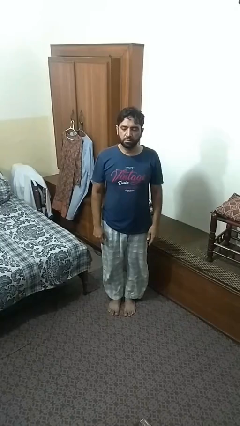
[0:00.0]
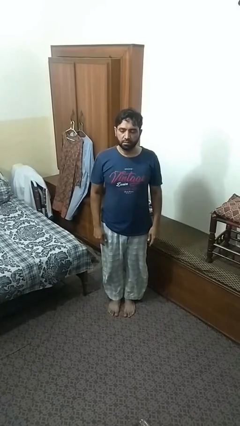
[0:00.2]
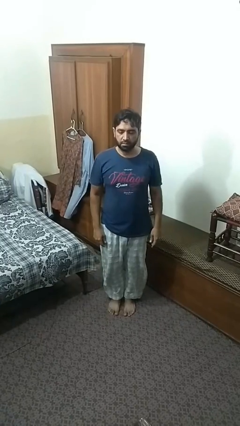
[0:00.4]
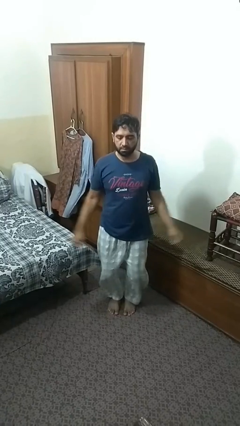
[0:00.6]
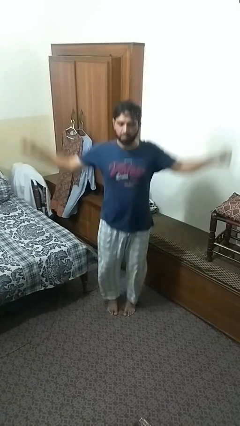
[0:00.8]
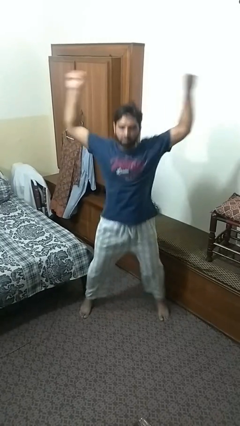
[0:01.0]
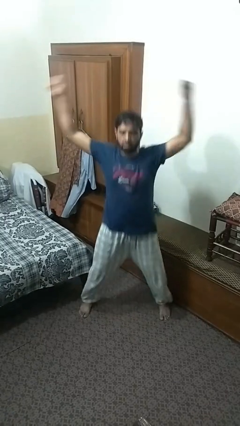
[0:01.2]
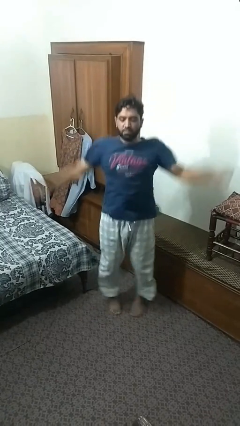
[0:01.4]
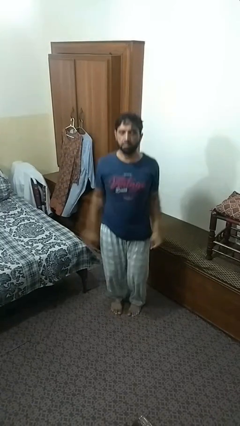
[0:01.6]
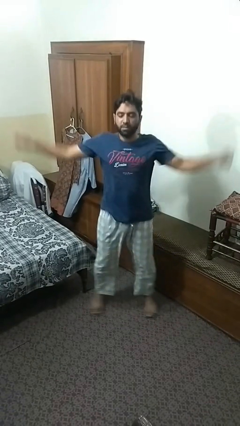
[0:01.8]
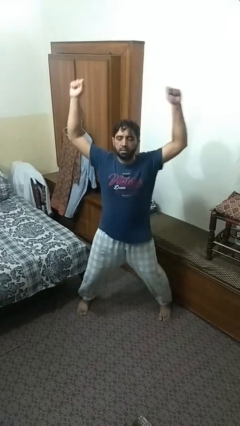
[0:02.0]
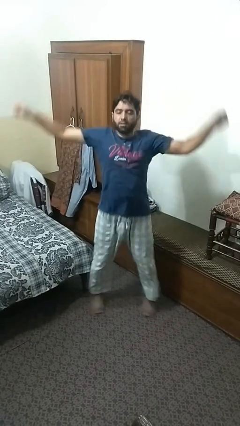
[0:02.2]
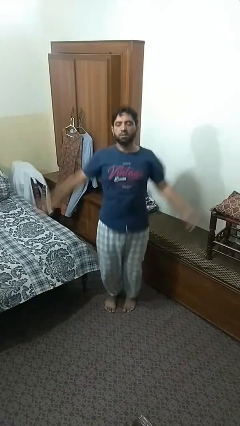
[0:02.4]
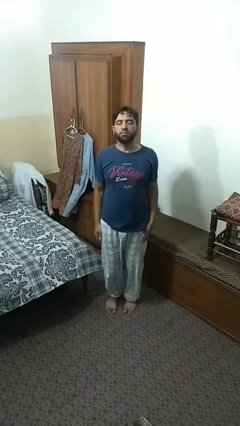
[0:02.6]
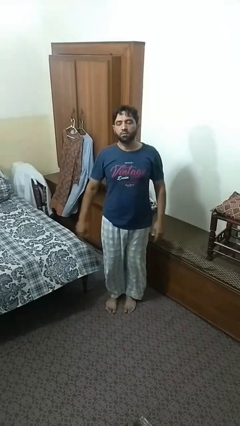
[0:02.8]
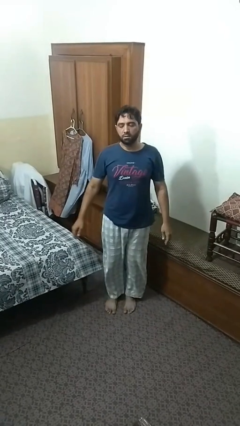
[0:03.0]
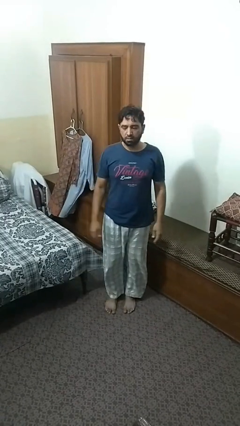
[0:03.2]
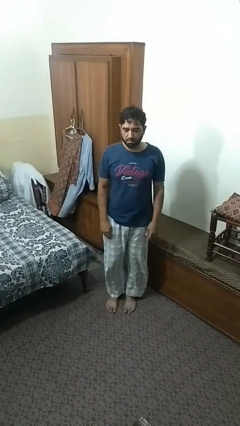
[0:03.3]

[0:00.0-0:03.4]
person exercises with jumping jacks

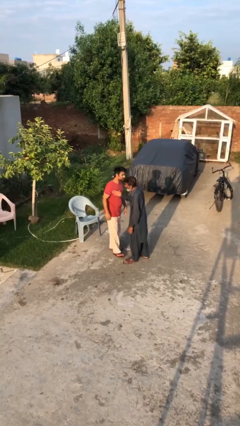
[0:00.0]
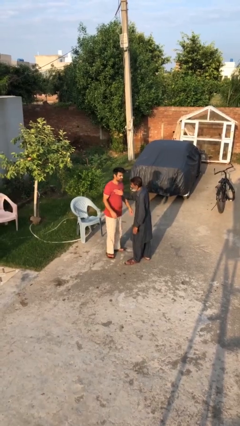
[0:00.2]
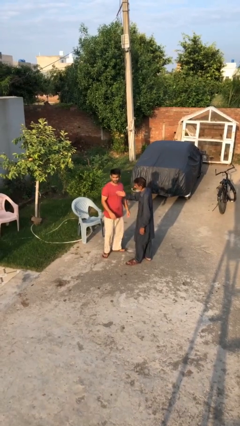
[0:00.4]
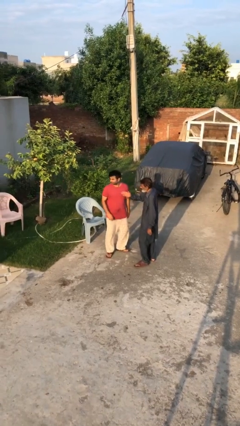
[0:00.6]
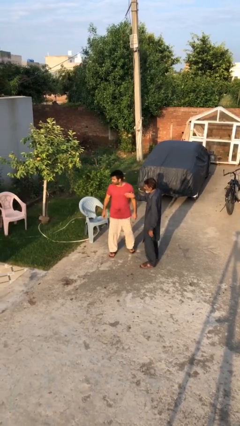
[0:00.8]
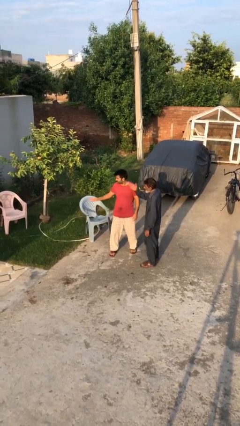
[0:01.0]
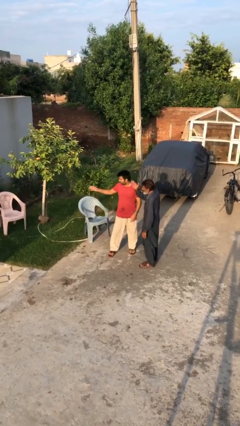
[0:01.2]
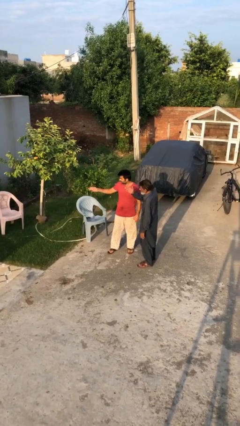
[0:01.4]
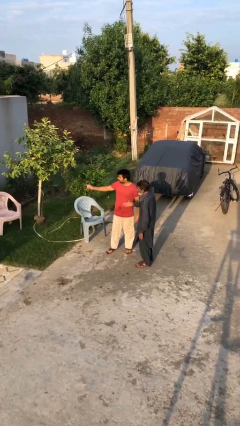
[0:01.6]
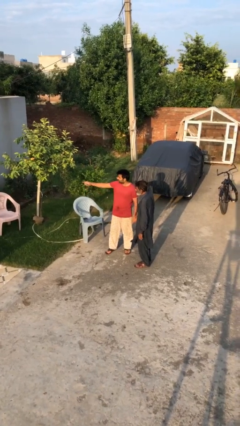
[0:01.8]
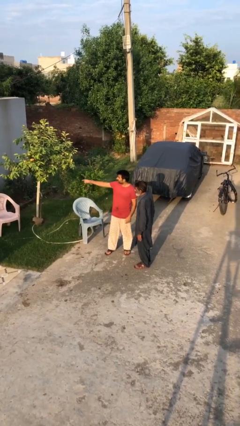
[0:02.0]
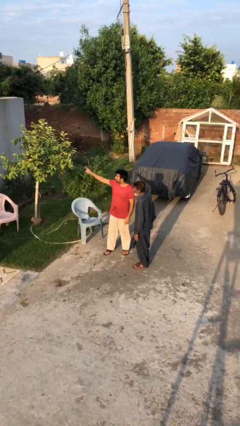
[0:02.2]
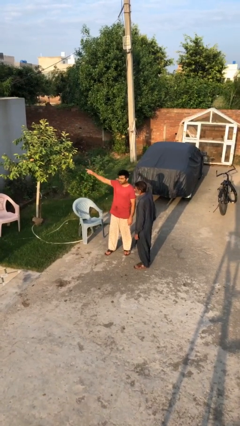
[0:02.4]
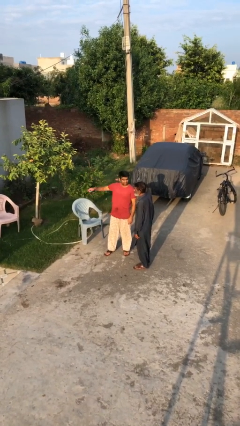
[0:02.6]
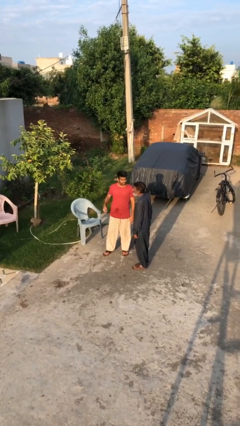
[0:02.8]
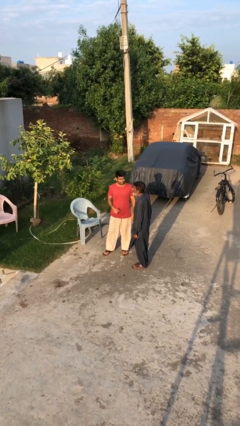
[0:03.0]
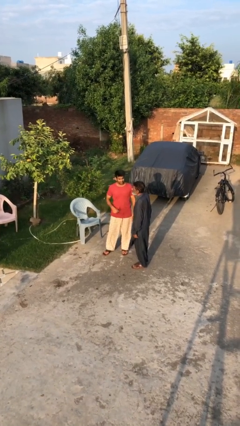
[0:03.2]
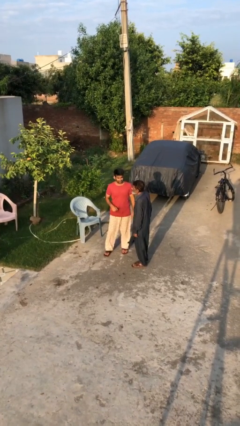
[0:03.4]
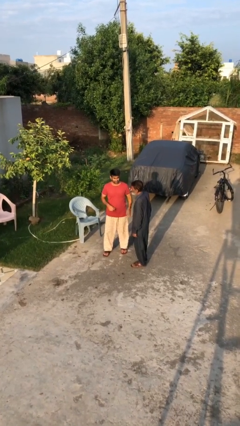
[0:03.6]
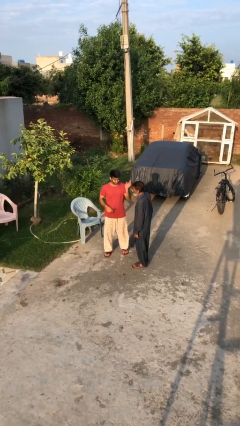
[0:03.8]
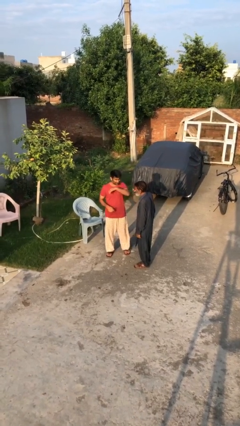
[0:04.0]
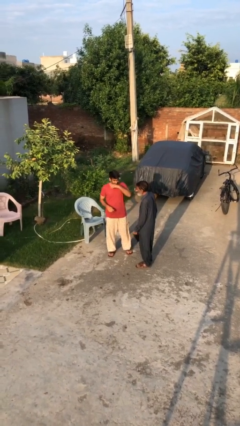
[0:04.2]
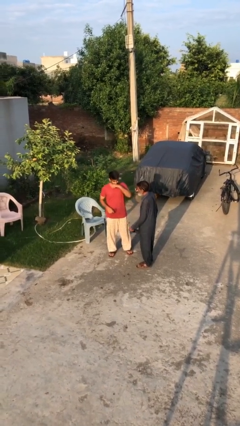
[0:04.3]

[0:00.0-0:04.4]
person talks to person

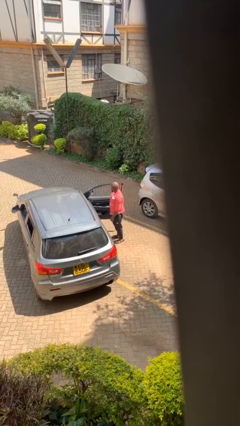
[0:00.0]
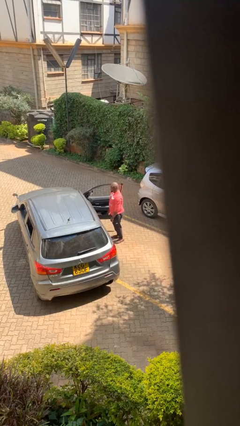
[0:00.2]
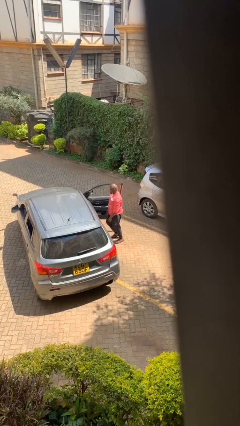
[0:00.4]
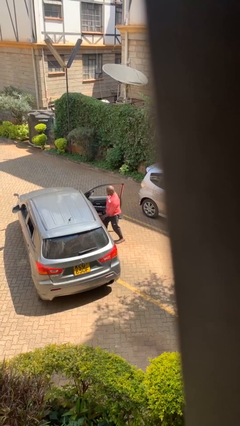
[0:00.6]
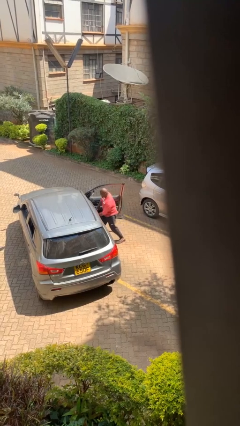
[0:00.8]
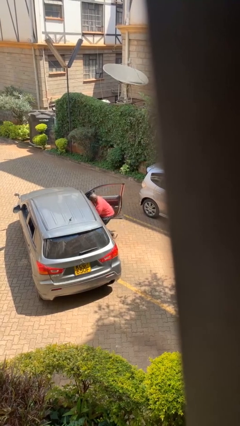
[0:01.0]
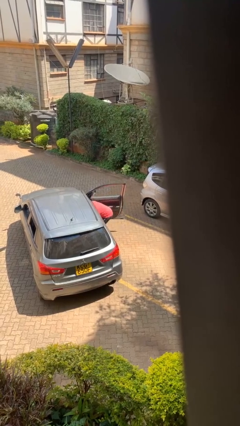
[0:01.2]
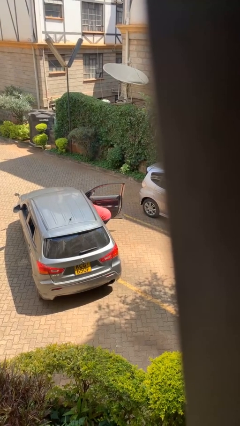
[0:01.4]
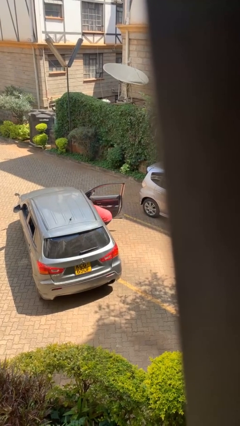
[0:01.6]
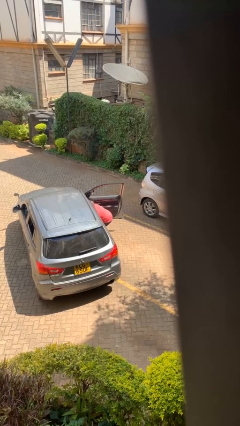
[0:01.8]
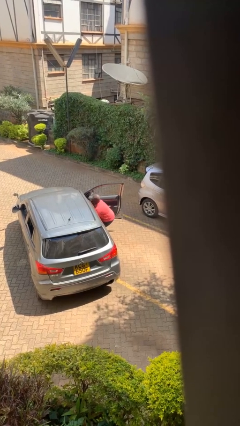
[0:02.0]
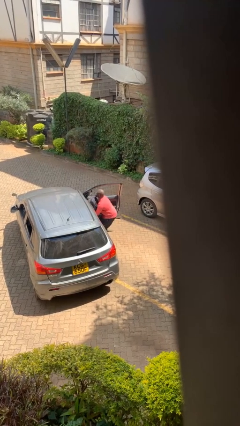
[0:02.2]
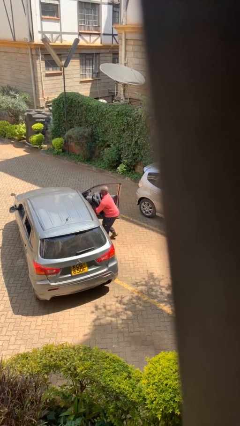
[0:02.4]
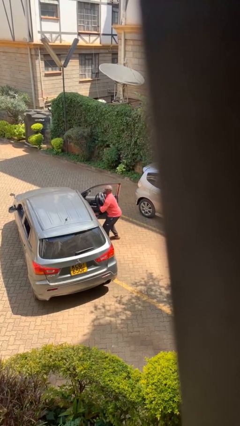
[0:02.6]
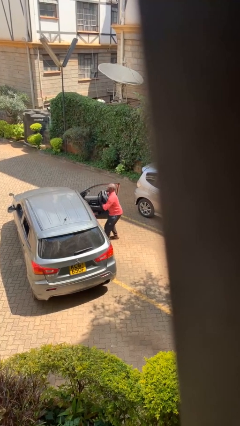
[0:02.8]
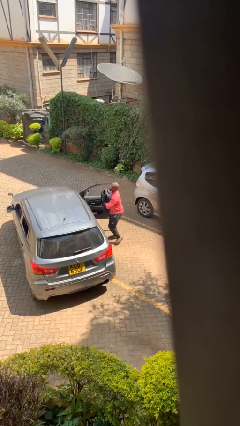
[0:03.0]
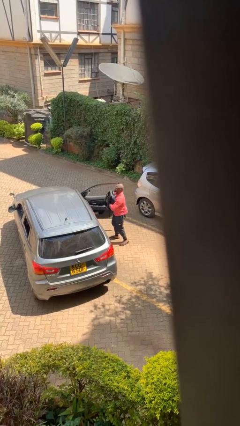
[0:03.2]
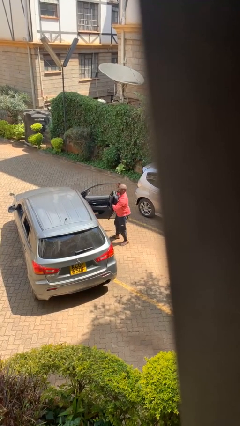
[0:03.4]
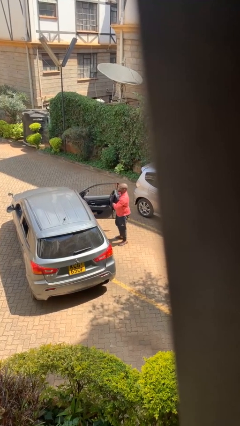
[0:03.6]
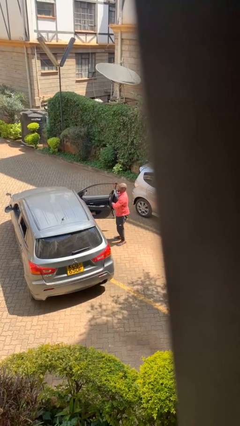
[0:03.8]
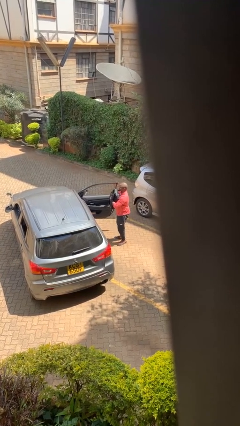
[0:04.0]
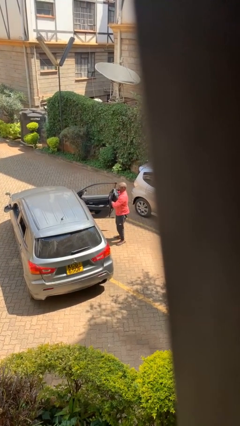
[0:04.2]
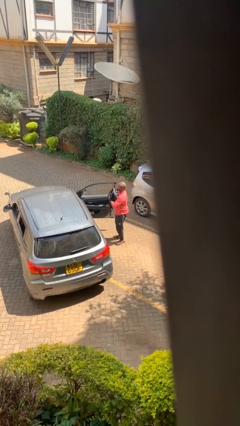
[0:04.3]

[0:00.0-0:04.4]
person unloads car

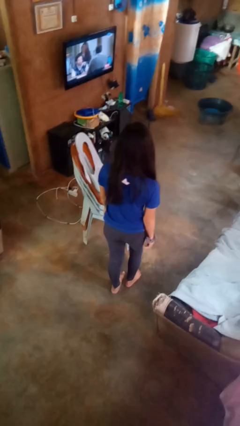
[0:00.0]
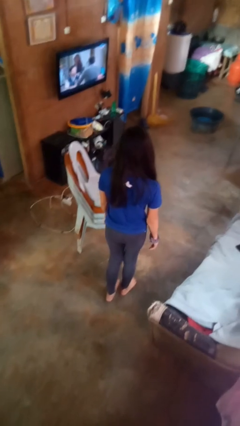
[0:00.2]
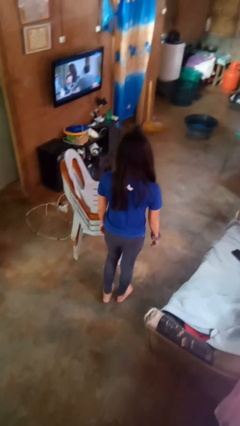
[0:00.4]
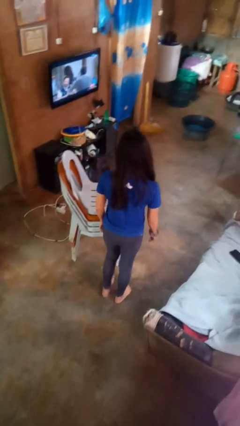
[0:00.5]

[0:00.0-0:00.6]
person trips on object on floor

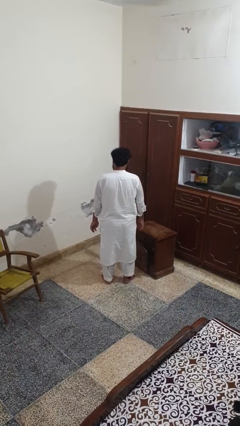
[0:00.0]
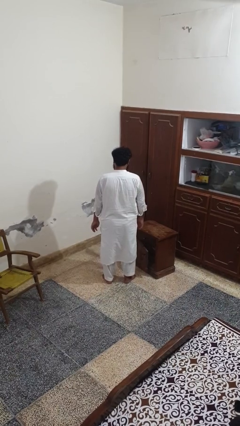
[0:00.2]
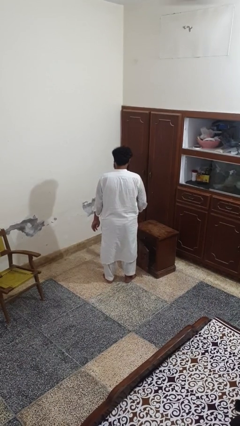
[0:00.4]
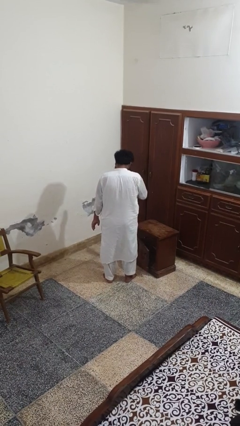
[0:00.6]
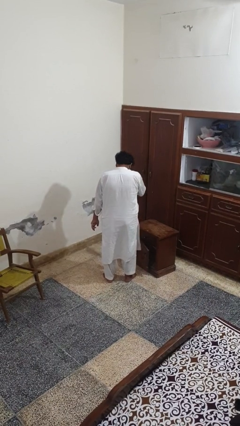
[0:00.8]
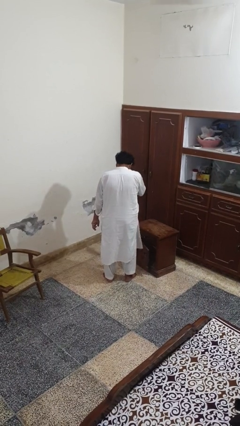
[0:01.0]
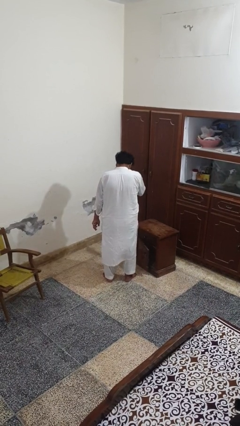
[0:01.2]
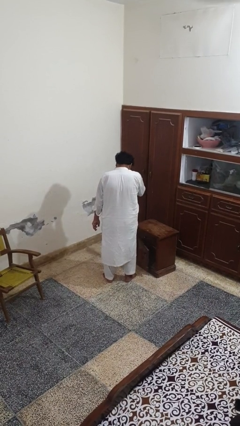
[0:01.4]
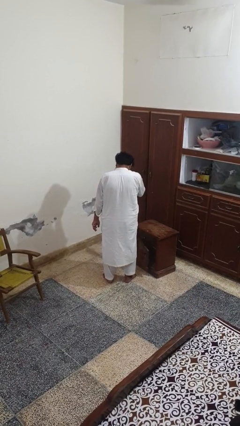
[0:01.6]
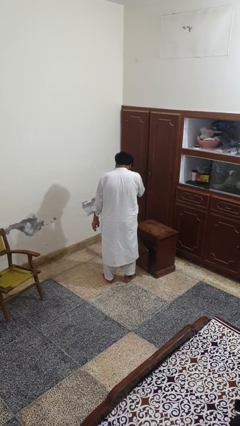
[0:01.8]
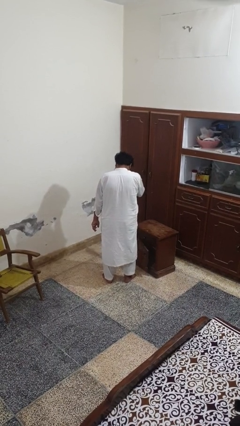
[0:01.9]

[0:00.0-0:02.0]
person sneezes into hand

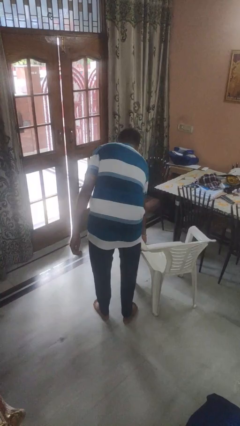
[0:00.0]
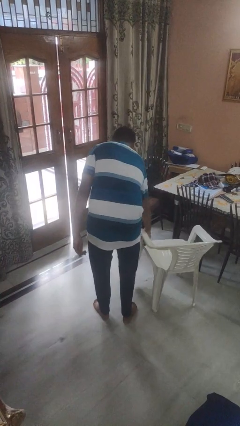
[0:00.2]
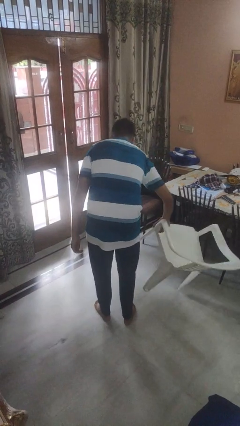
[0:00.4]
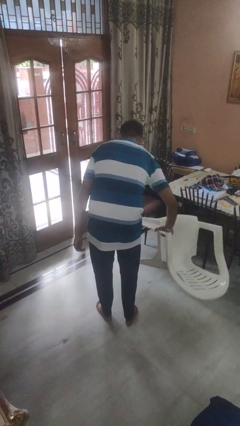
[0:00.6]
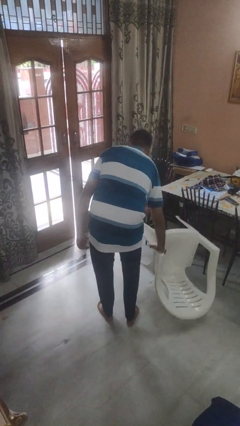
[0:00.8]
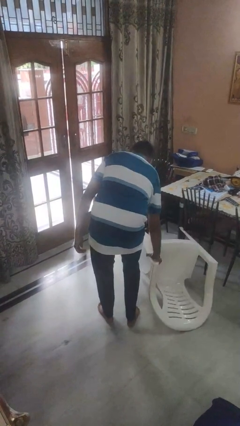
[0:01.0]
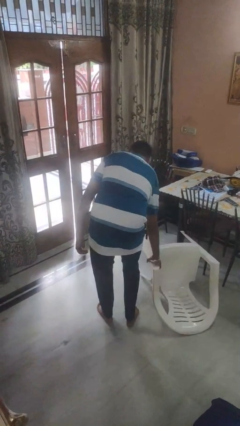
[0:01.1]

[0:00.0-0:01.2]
person knocks over furniture

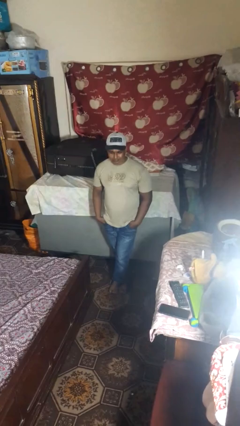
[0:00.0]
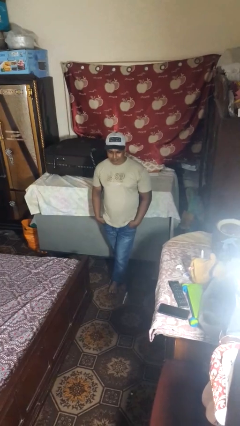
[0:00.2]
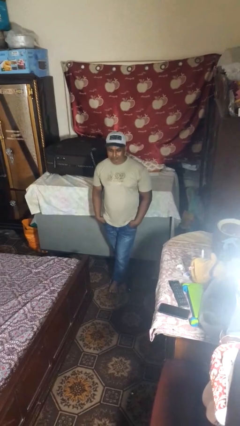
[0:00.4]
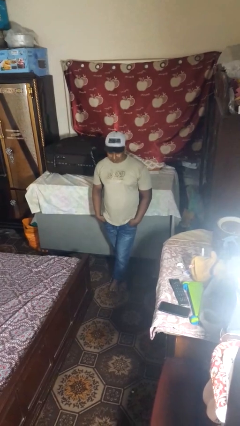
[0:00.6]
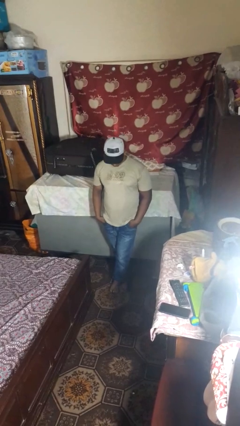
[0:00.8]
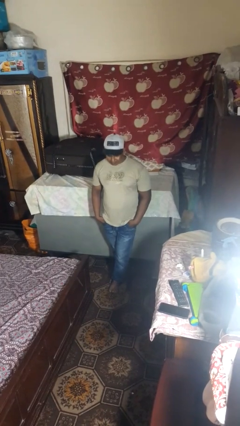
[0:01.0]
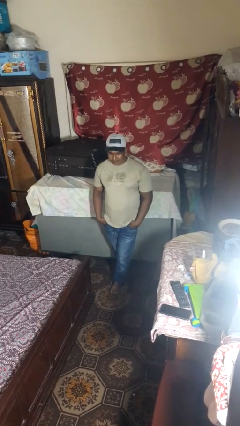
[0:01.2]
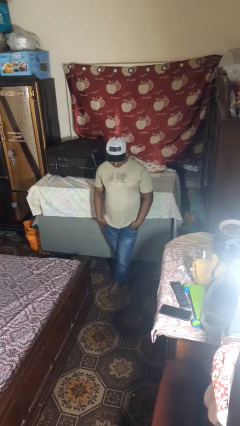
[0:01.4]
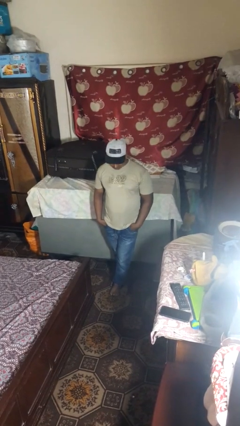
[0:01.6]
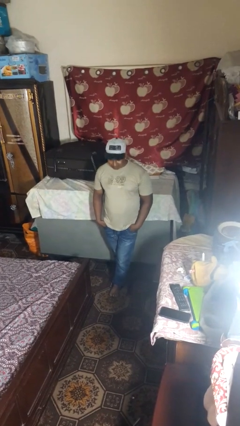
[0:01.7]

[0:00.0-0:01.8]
person nods head
